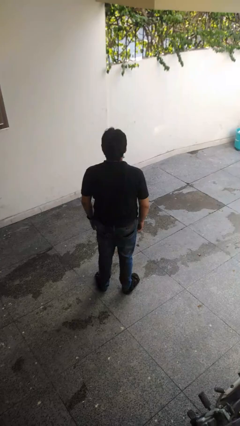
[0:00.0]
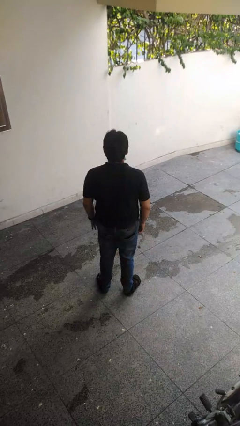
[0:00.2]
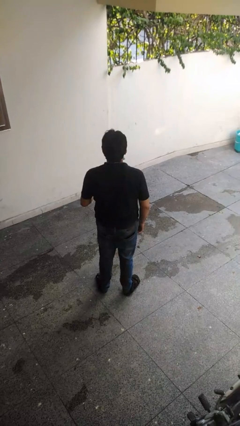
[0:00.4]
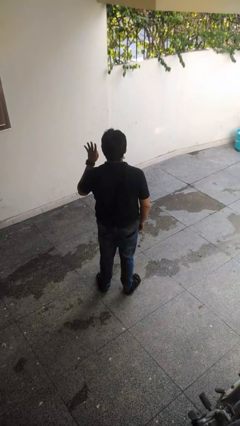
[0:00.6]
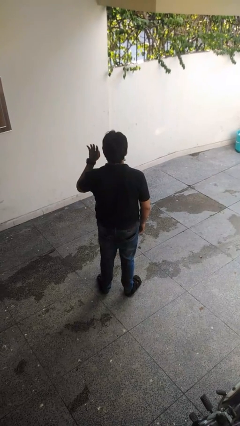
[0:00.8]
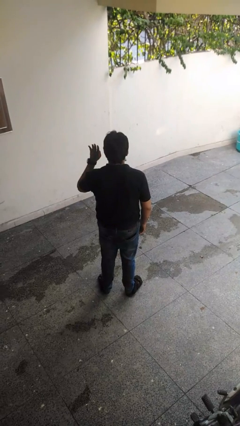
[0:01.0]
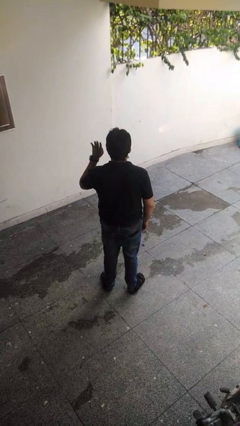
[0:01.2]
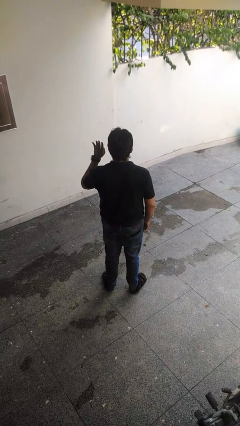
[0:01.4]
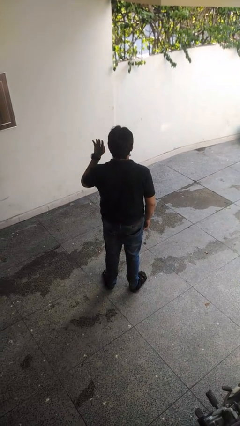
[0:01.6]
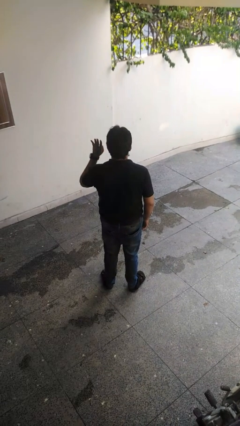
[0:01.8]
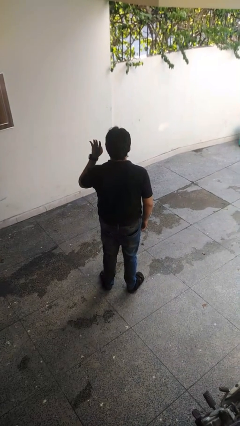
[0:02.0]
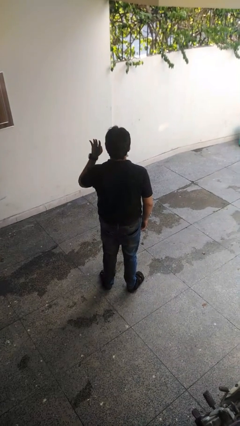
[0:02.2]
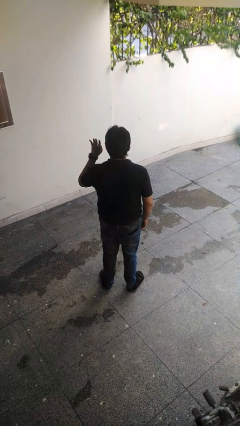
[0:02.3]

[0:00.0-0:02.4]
person gestures number four

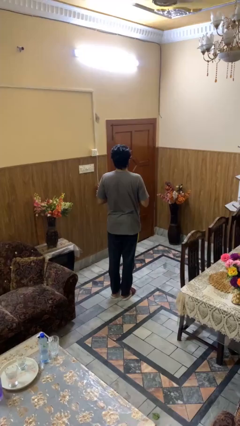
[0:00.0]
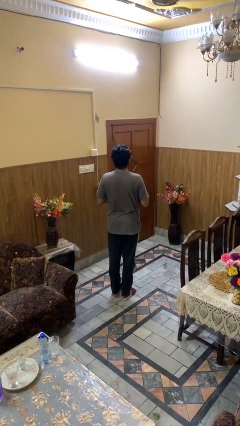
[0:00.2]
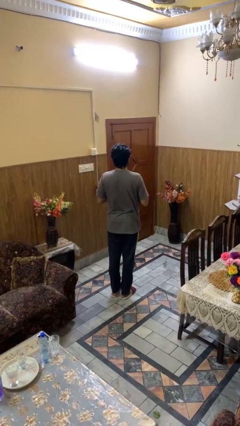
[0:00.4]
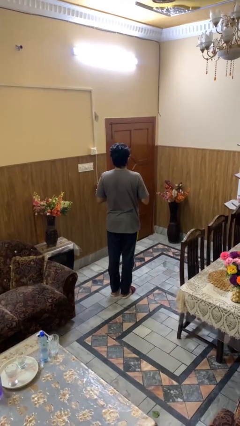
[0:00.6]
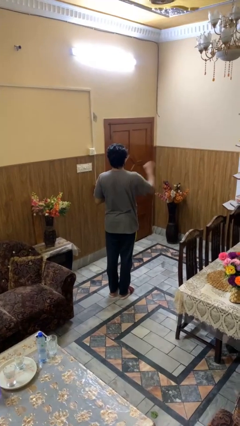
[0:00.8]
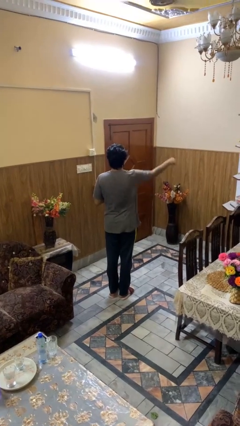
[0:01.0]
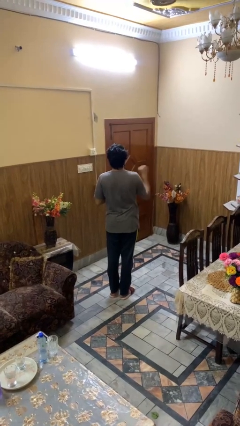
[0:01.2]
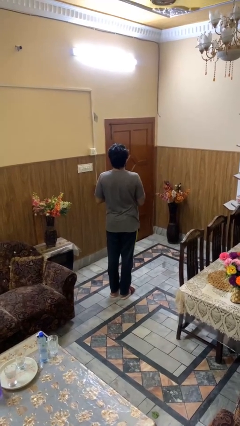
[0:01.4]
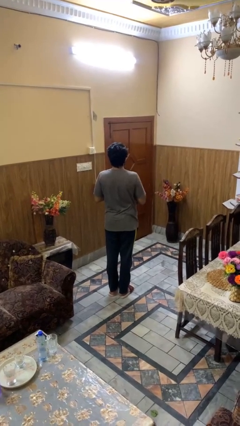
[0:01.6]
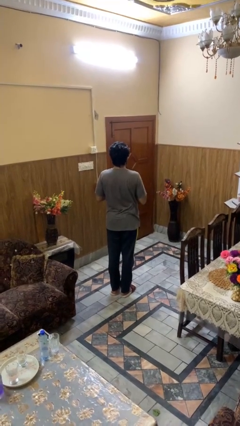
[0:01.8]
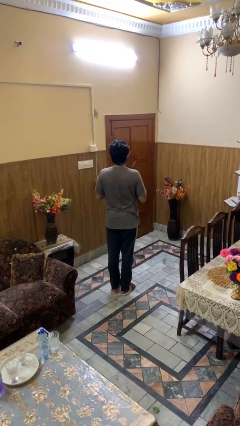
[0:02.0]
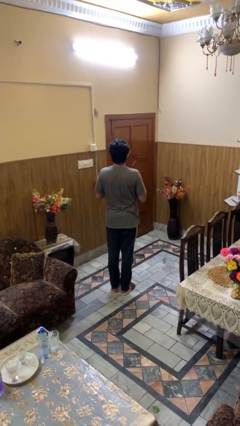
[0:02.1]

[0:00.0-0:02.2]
person punches

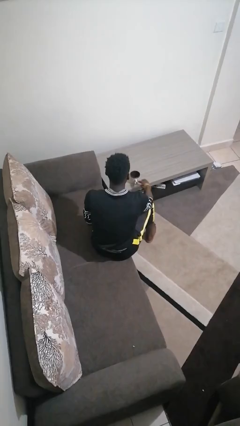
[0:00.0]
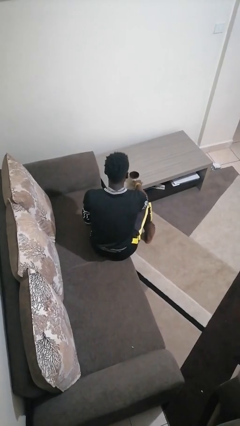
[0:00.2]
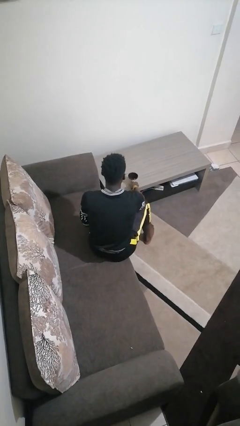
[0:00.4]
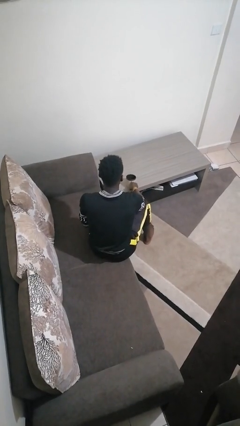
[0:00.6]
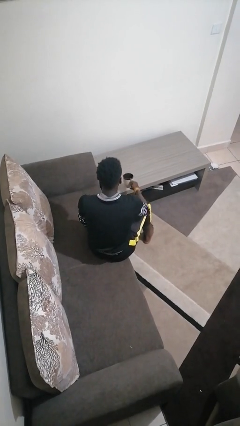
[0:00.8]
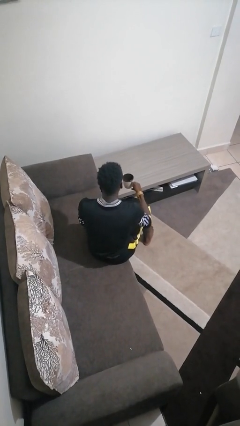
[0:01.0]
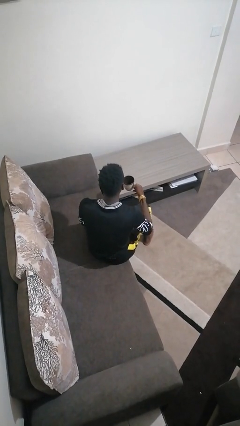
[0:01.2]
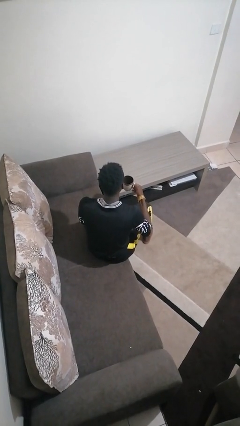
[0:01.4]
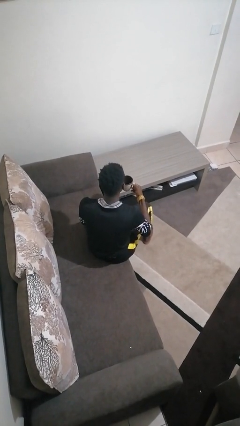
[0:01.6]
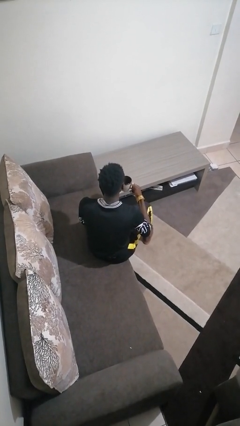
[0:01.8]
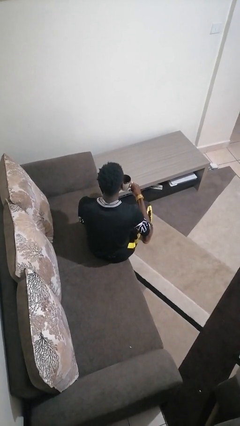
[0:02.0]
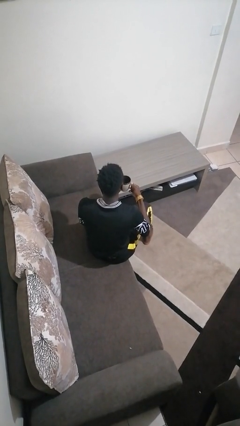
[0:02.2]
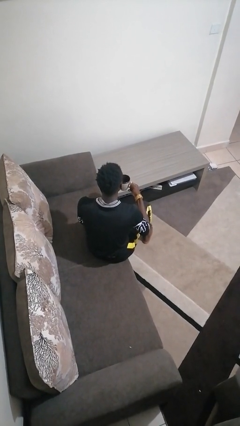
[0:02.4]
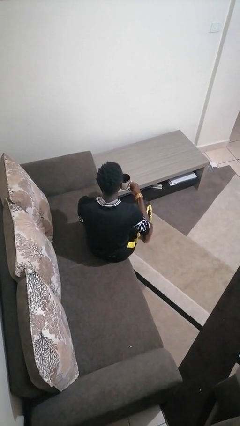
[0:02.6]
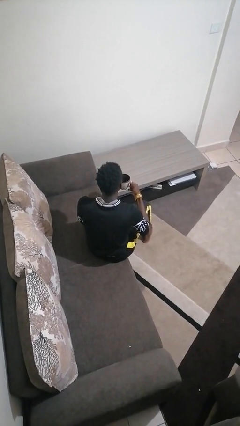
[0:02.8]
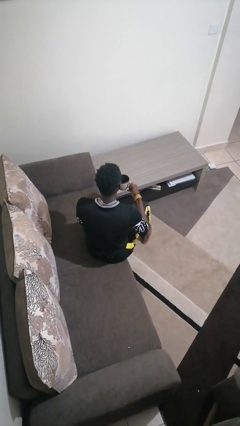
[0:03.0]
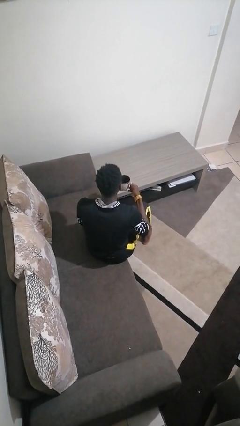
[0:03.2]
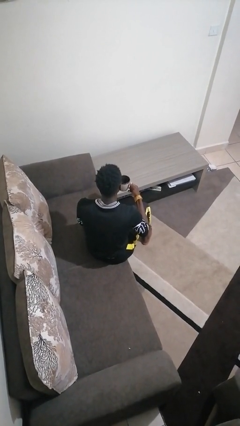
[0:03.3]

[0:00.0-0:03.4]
person picks up object from table

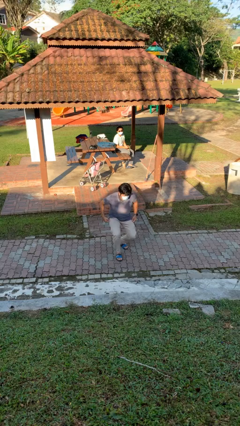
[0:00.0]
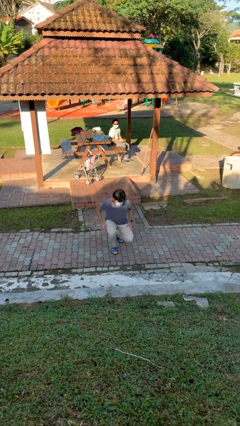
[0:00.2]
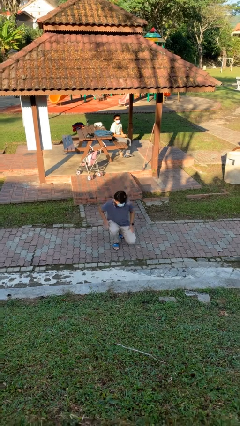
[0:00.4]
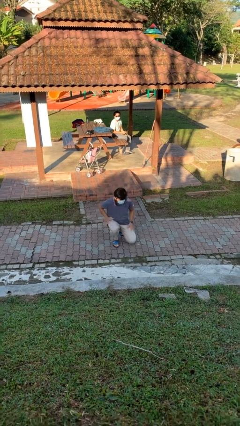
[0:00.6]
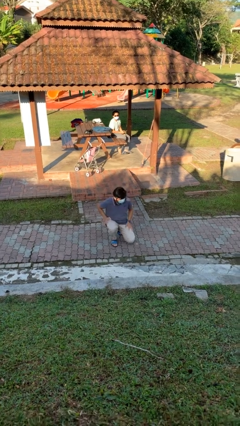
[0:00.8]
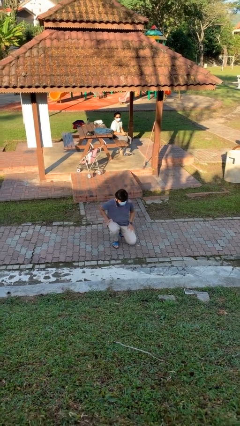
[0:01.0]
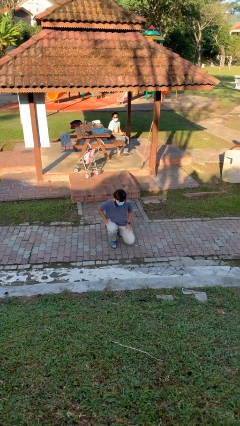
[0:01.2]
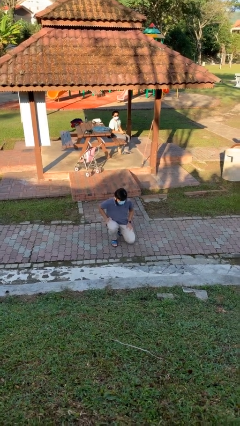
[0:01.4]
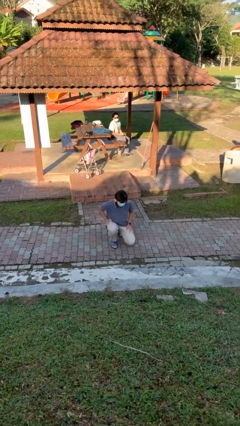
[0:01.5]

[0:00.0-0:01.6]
person kneels

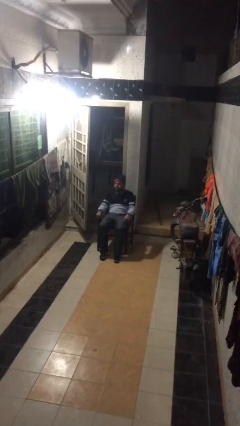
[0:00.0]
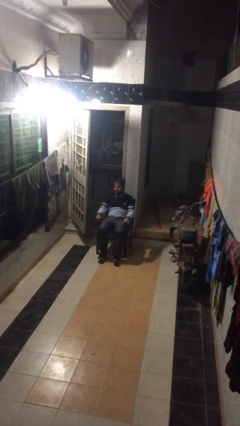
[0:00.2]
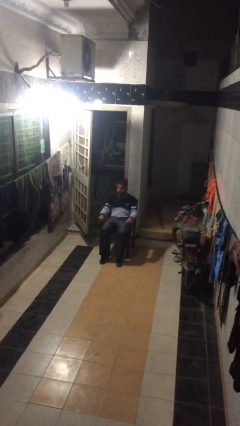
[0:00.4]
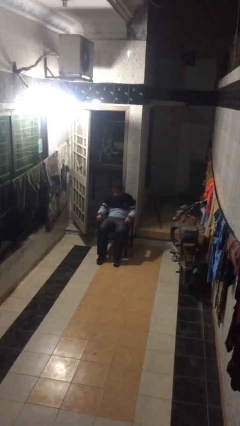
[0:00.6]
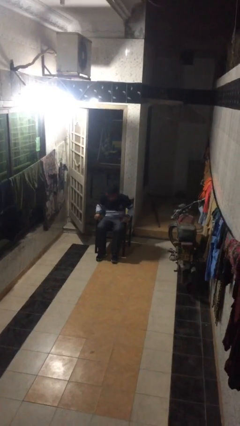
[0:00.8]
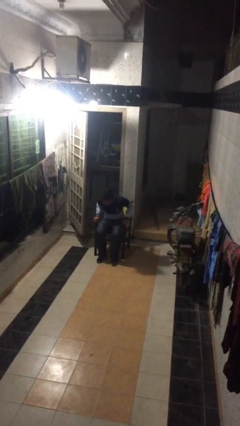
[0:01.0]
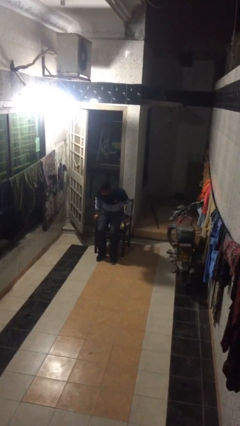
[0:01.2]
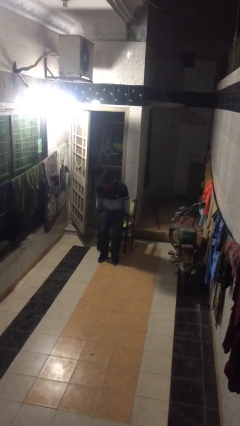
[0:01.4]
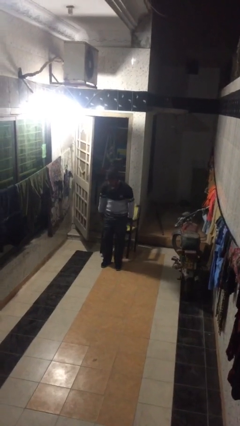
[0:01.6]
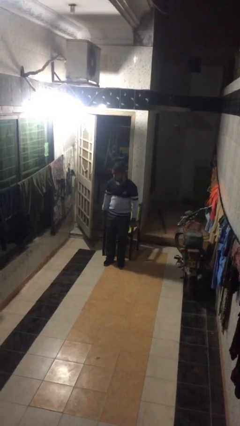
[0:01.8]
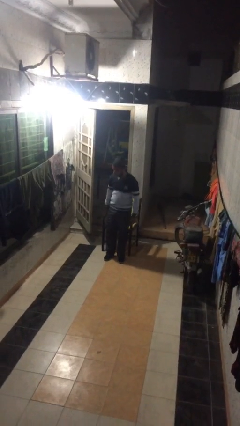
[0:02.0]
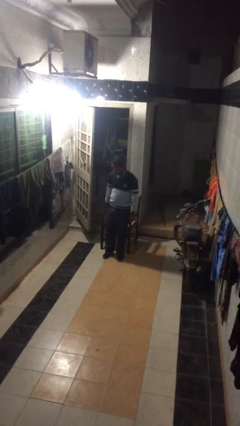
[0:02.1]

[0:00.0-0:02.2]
person stands up

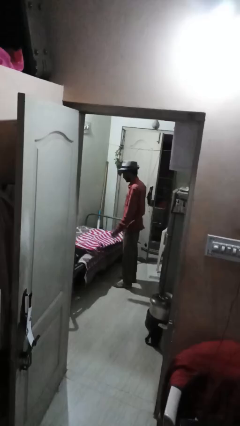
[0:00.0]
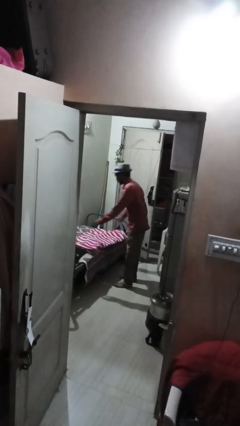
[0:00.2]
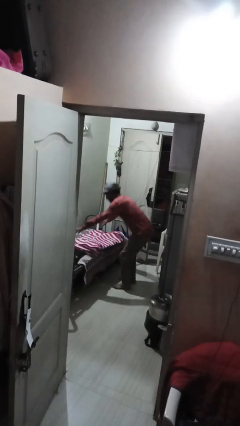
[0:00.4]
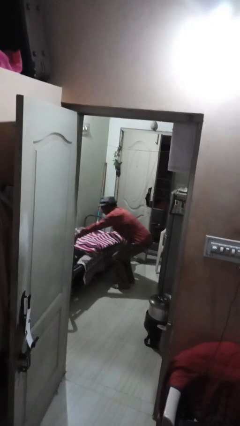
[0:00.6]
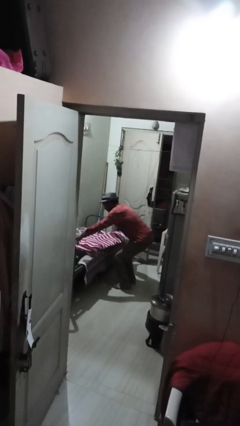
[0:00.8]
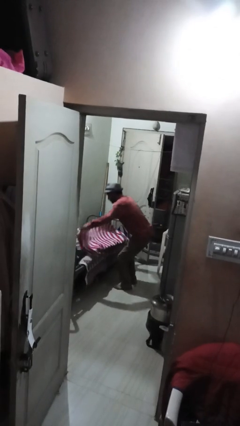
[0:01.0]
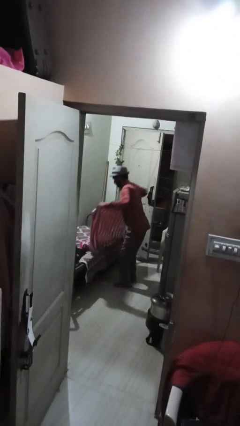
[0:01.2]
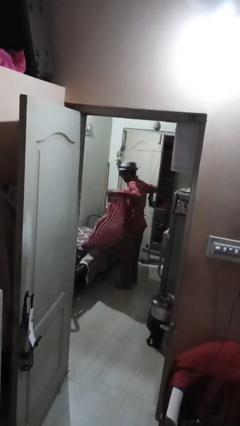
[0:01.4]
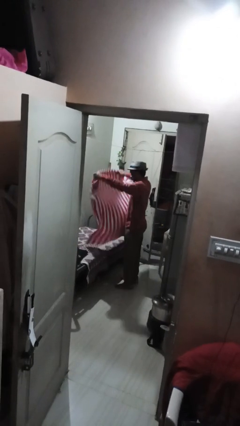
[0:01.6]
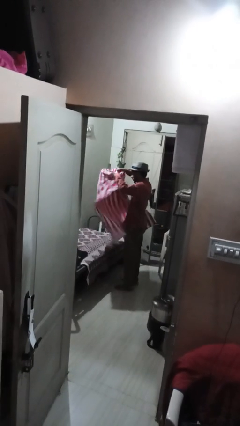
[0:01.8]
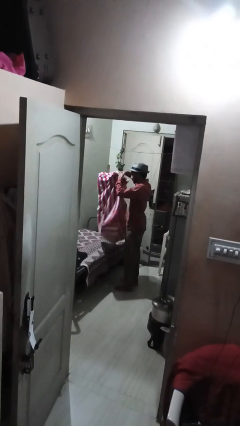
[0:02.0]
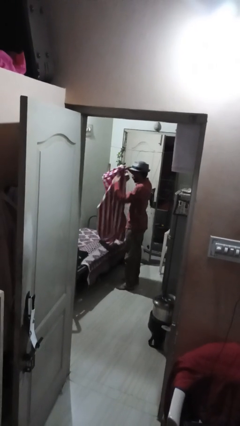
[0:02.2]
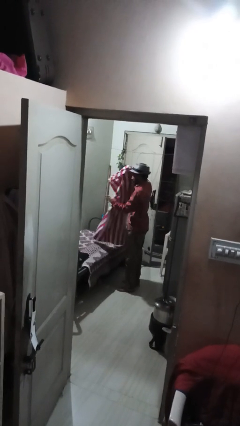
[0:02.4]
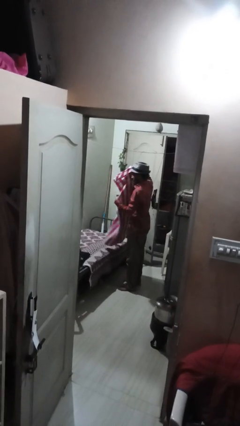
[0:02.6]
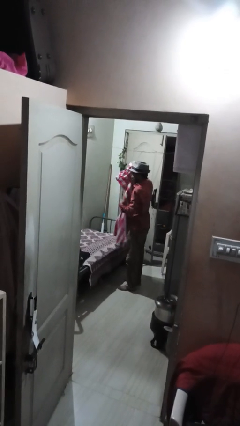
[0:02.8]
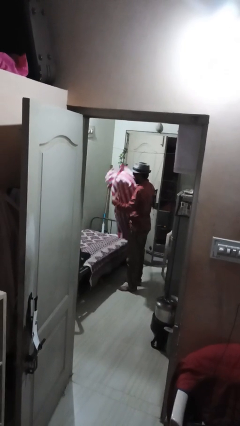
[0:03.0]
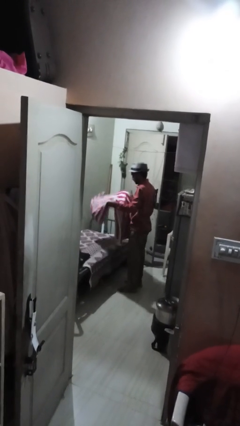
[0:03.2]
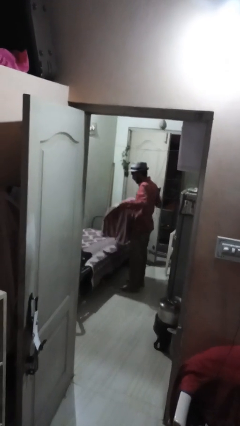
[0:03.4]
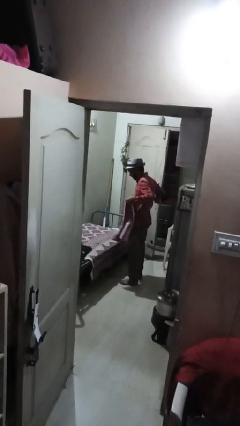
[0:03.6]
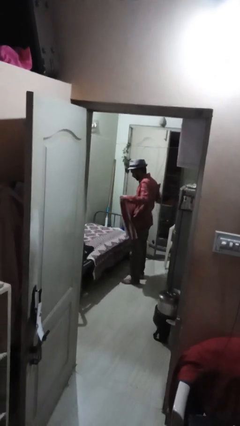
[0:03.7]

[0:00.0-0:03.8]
person folds blanket

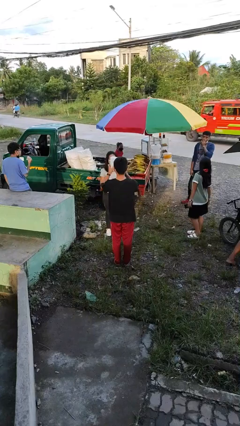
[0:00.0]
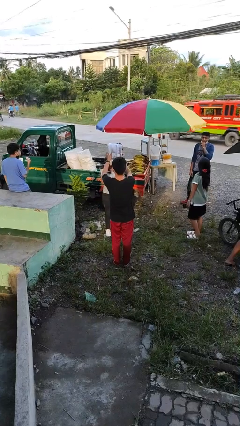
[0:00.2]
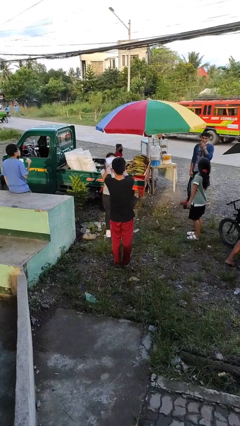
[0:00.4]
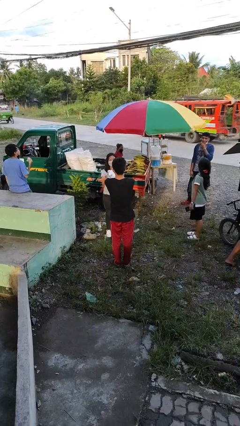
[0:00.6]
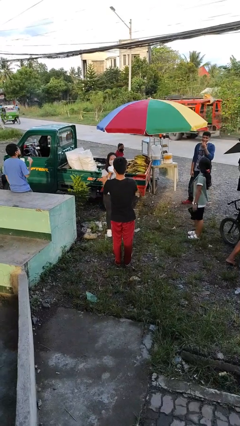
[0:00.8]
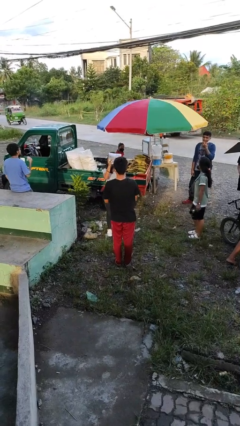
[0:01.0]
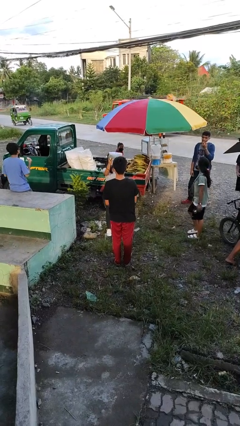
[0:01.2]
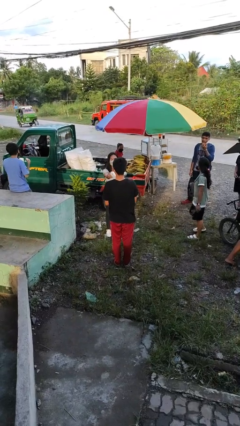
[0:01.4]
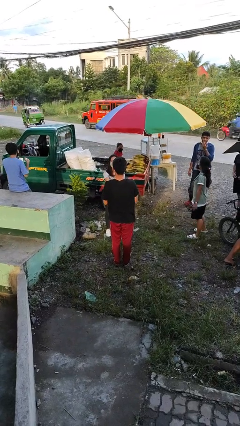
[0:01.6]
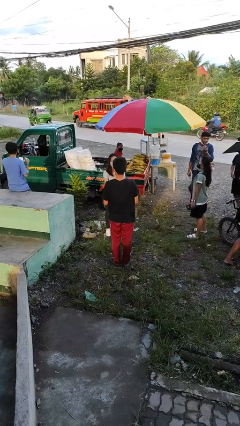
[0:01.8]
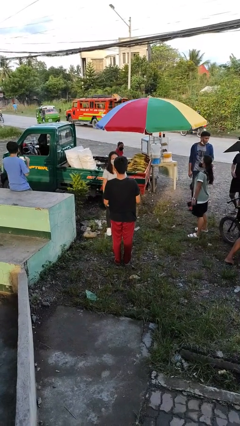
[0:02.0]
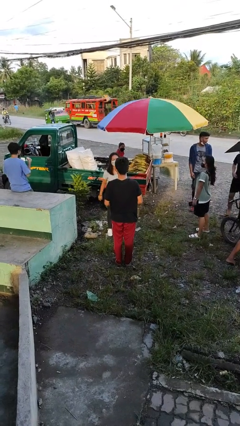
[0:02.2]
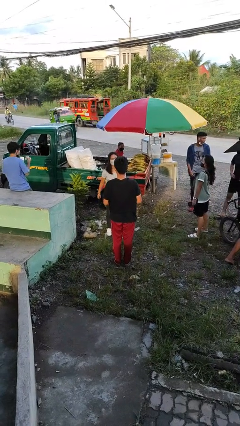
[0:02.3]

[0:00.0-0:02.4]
person transfers object to person
